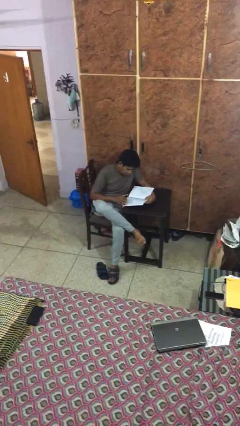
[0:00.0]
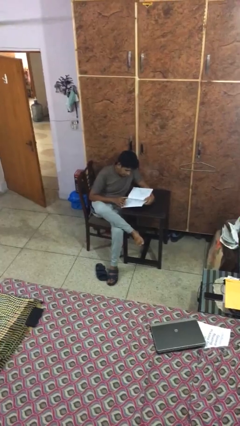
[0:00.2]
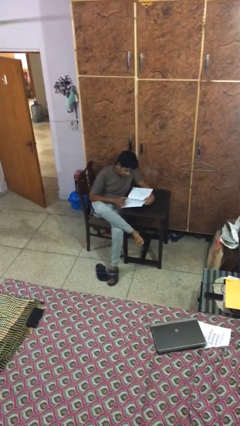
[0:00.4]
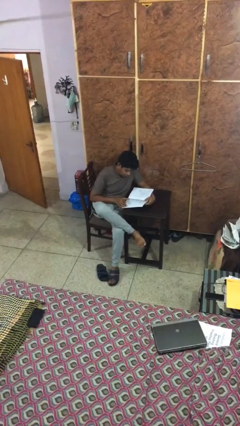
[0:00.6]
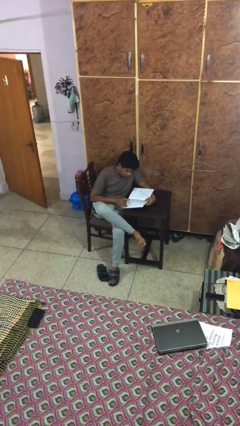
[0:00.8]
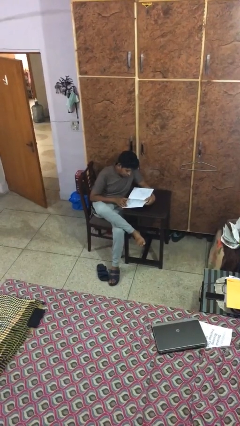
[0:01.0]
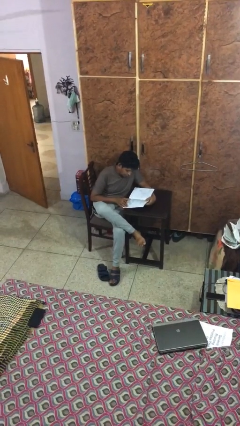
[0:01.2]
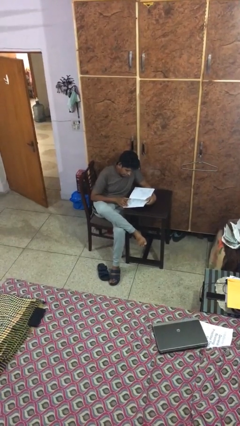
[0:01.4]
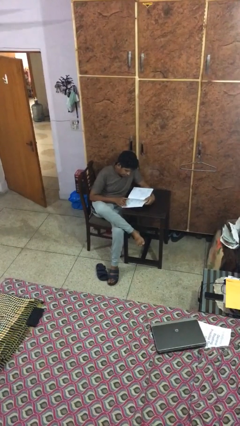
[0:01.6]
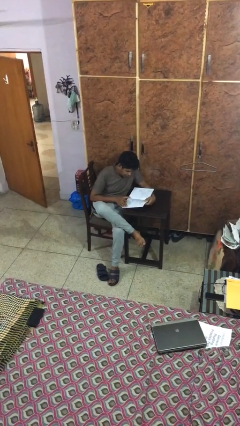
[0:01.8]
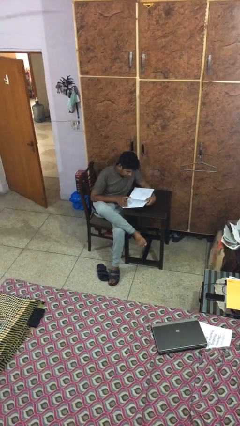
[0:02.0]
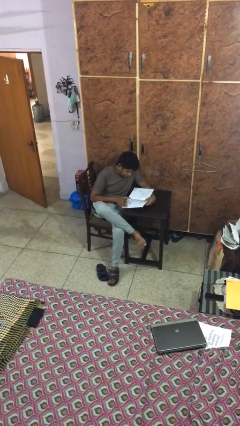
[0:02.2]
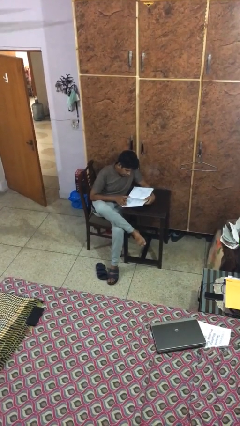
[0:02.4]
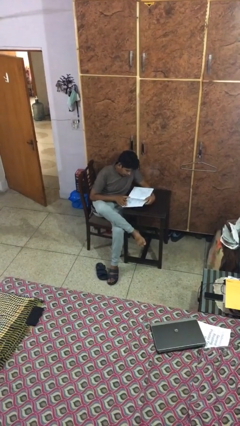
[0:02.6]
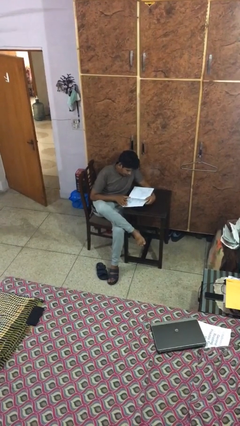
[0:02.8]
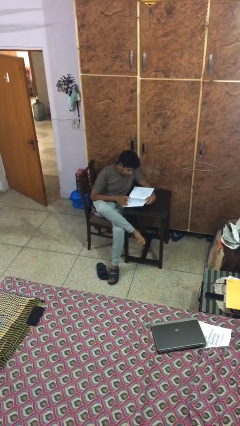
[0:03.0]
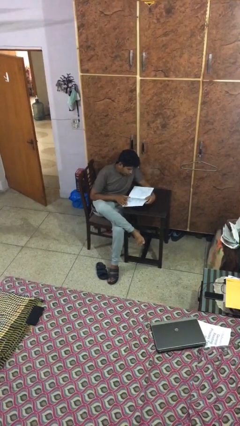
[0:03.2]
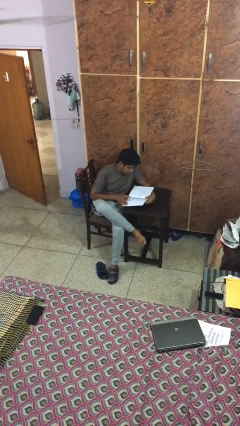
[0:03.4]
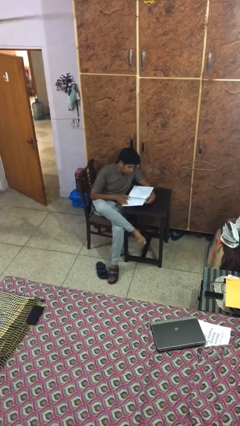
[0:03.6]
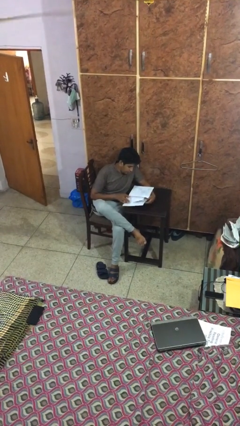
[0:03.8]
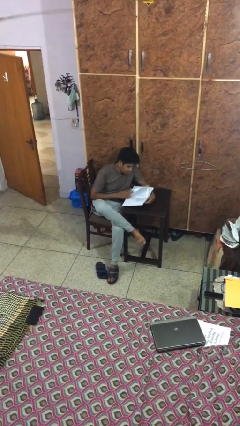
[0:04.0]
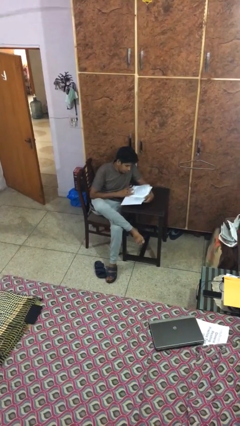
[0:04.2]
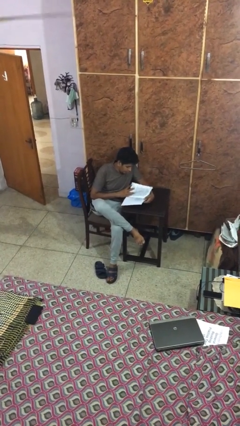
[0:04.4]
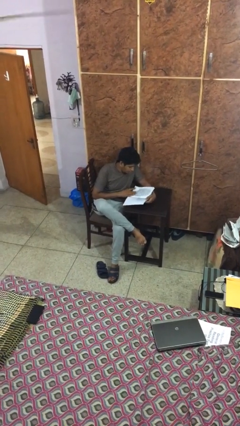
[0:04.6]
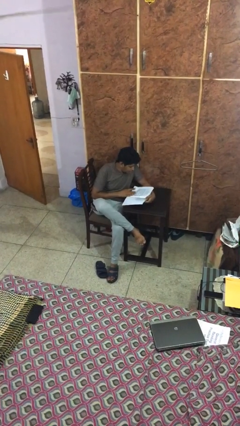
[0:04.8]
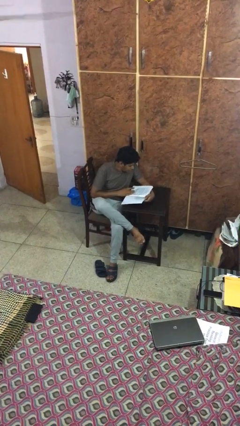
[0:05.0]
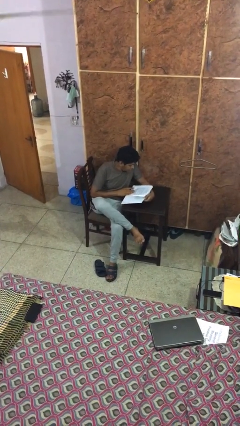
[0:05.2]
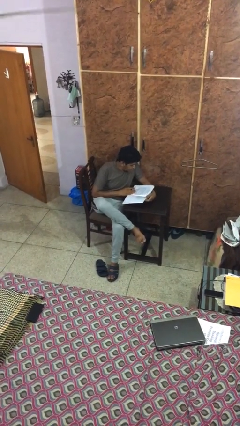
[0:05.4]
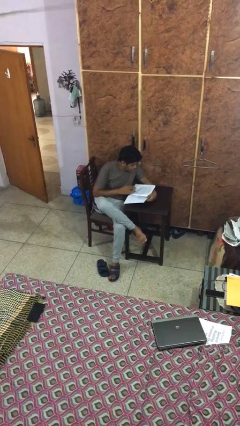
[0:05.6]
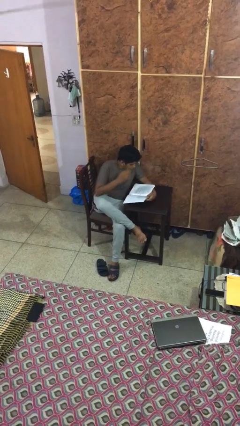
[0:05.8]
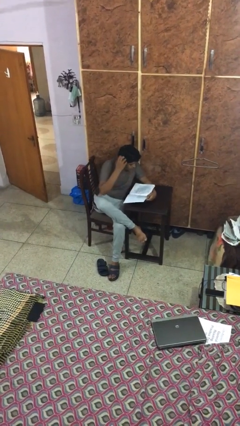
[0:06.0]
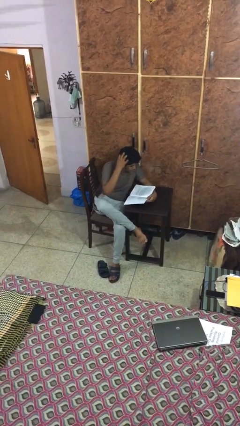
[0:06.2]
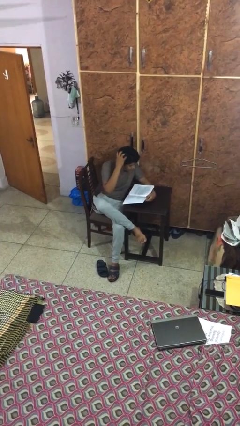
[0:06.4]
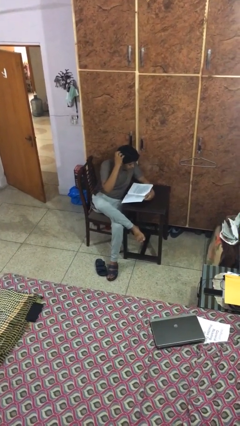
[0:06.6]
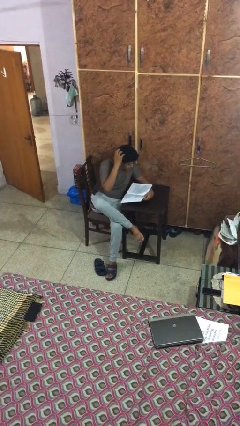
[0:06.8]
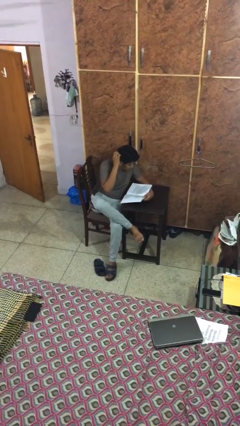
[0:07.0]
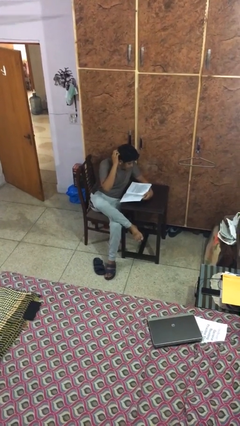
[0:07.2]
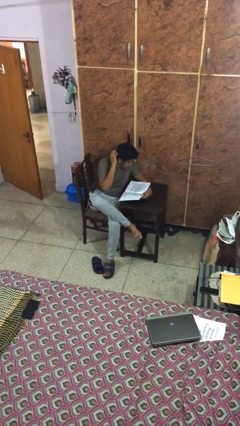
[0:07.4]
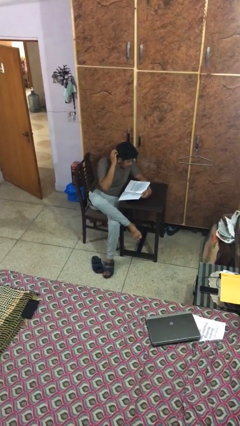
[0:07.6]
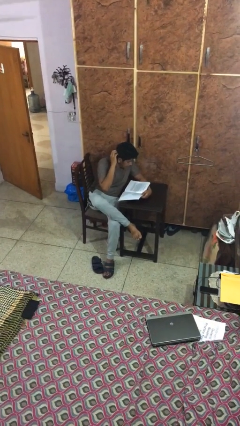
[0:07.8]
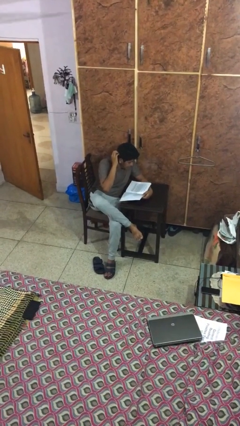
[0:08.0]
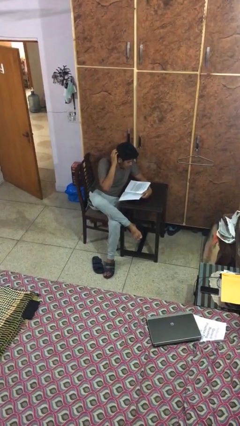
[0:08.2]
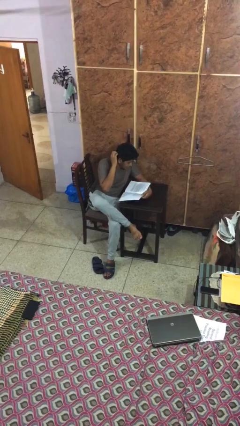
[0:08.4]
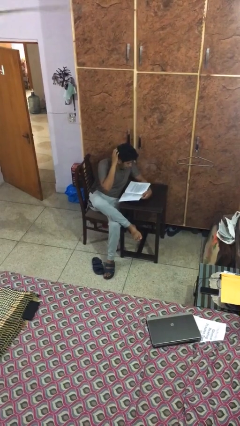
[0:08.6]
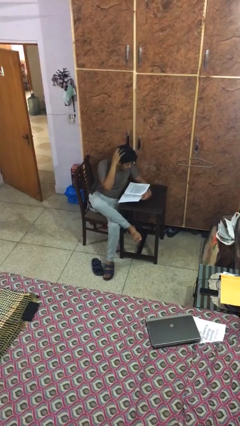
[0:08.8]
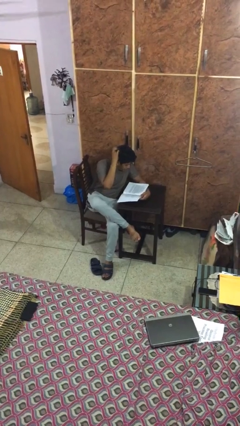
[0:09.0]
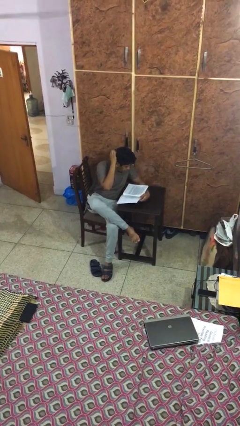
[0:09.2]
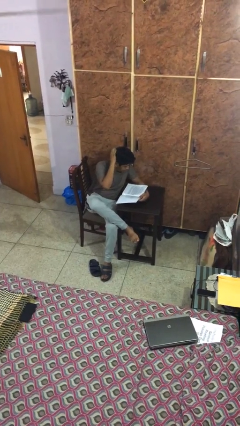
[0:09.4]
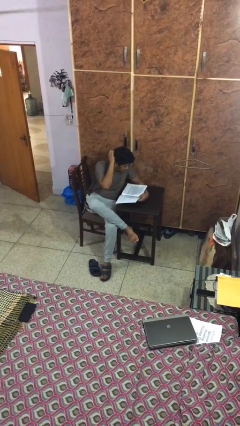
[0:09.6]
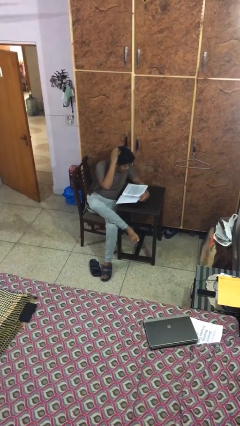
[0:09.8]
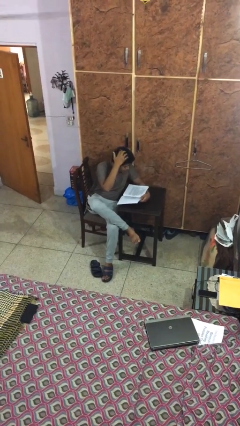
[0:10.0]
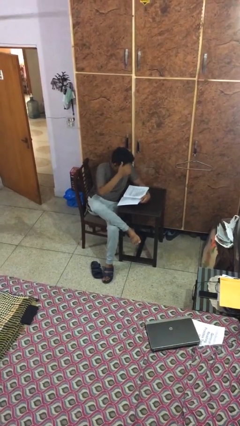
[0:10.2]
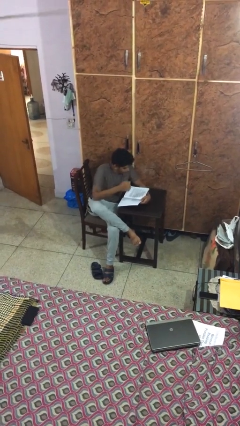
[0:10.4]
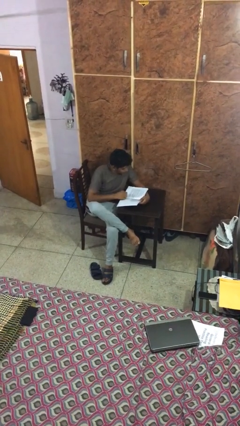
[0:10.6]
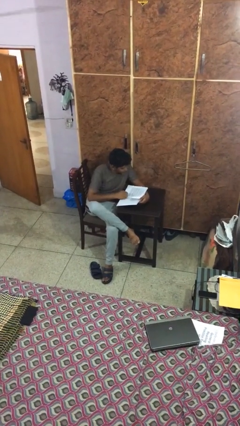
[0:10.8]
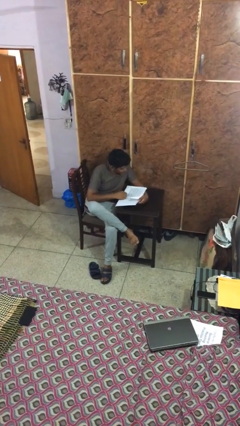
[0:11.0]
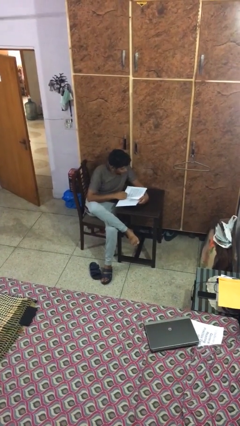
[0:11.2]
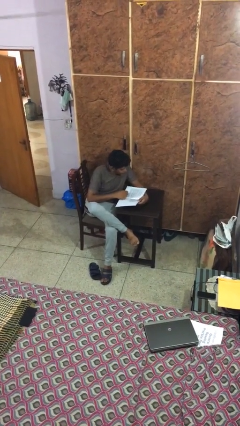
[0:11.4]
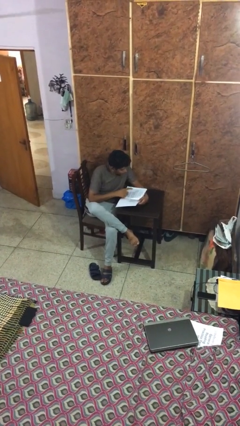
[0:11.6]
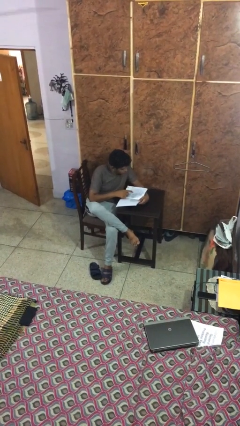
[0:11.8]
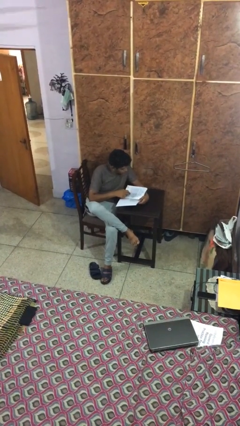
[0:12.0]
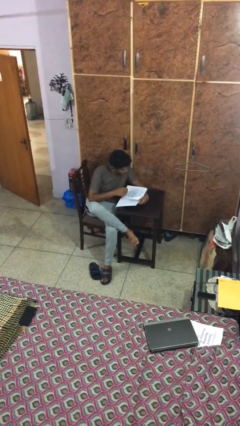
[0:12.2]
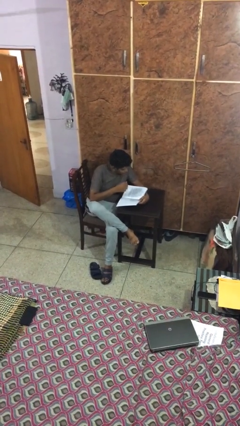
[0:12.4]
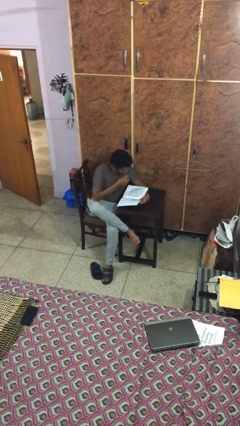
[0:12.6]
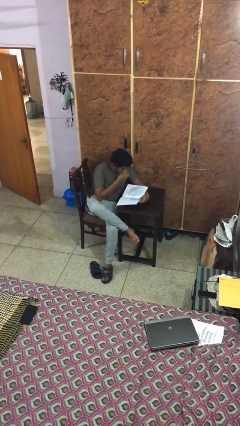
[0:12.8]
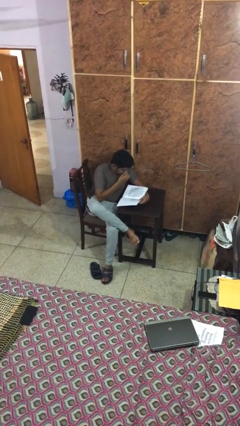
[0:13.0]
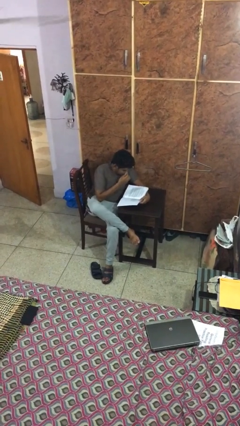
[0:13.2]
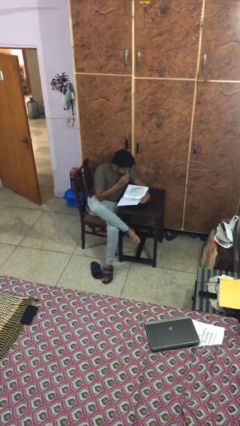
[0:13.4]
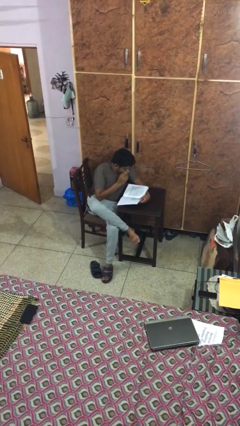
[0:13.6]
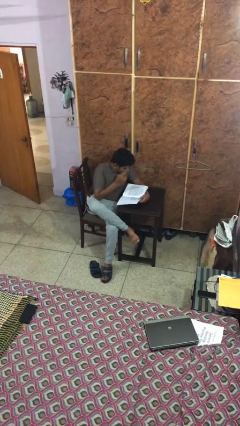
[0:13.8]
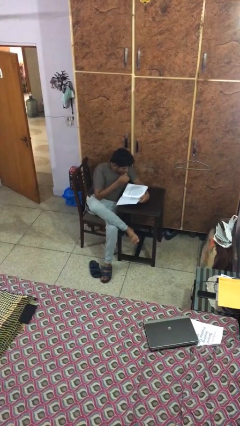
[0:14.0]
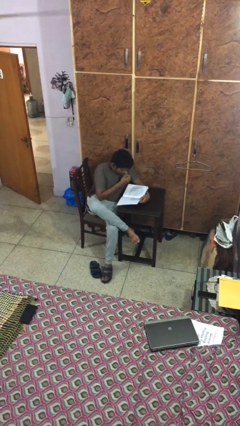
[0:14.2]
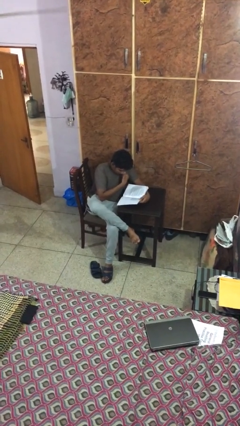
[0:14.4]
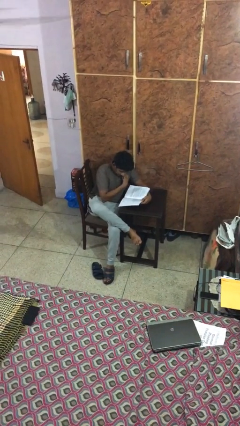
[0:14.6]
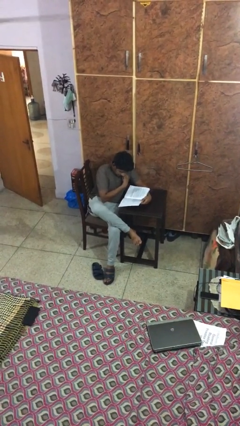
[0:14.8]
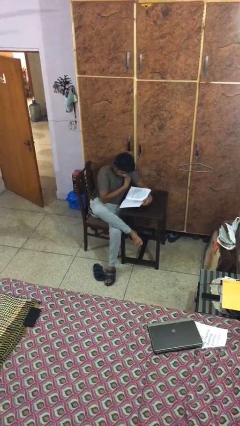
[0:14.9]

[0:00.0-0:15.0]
person reads document

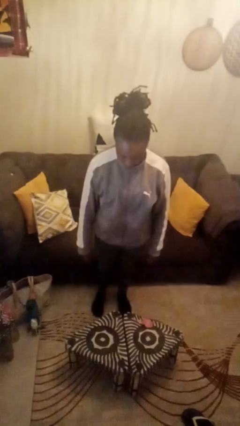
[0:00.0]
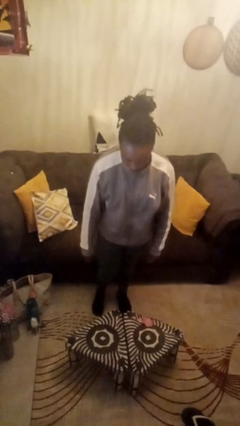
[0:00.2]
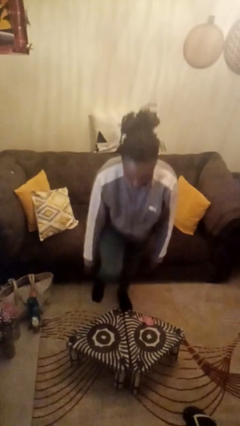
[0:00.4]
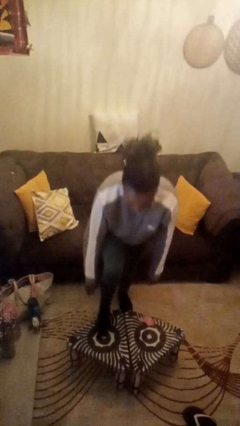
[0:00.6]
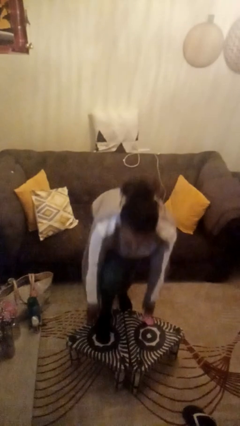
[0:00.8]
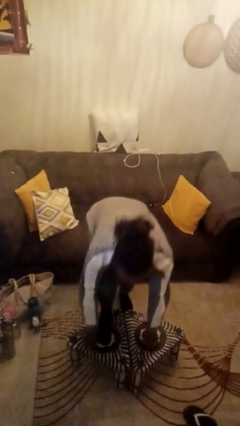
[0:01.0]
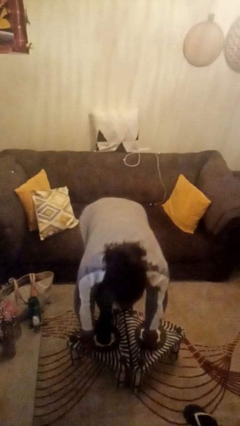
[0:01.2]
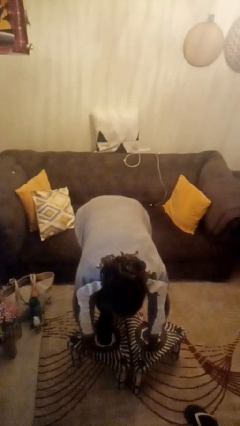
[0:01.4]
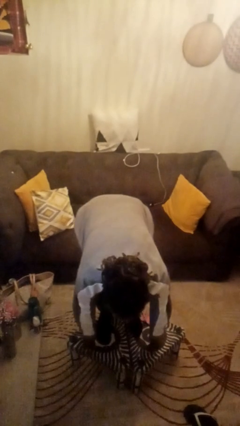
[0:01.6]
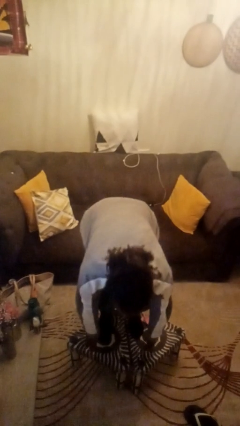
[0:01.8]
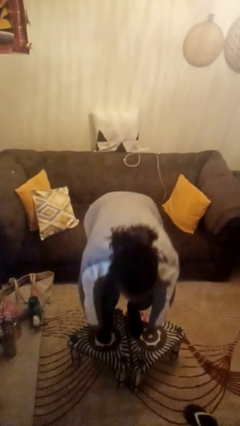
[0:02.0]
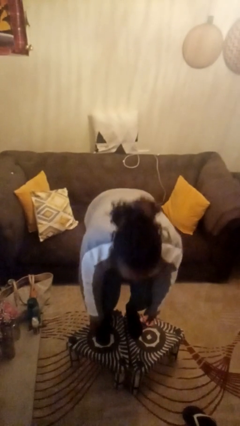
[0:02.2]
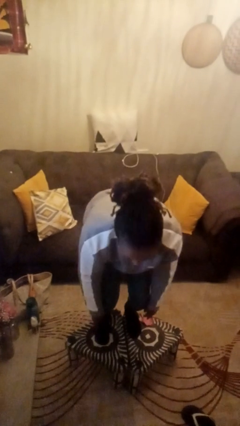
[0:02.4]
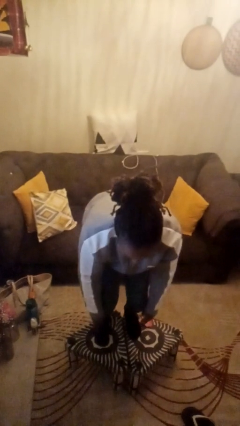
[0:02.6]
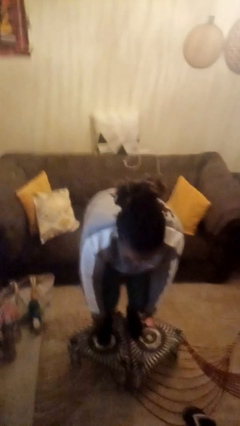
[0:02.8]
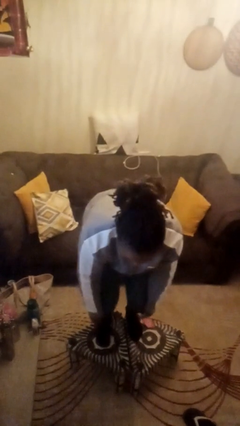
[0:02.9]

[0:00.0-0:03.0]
person climbs on table
